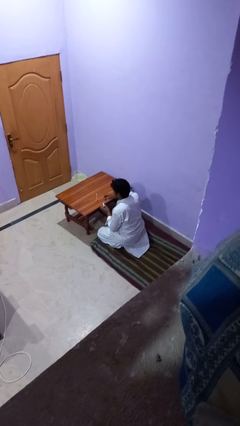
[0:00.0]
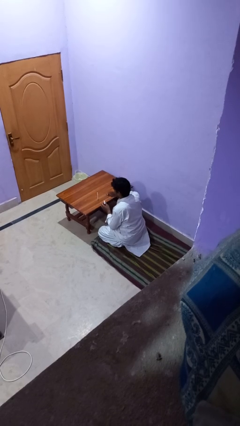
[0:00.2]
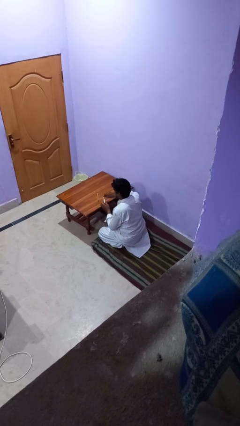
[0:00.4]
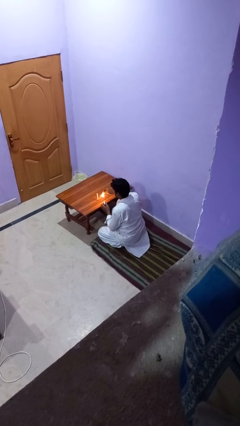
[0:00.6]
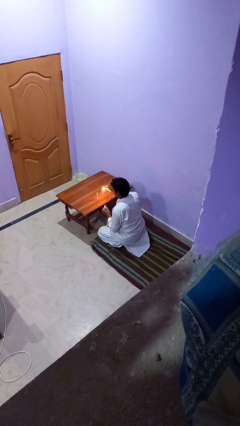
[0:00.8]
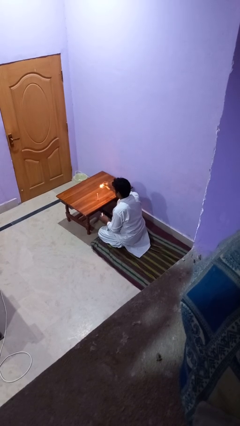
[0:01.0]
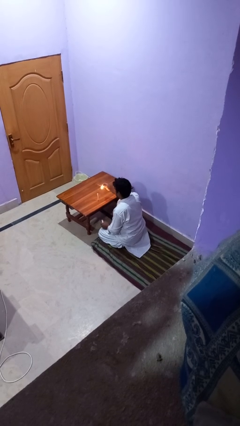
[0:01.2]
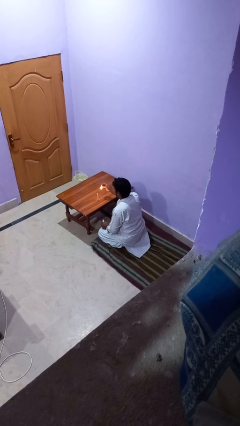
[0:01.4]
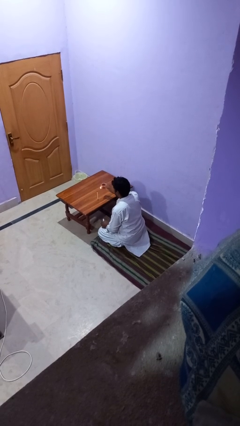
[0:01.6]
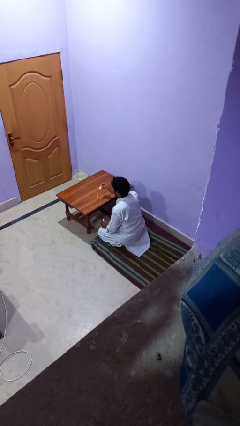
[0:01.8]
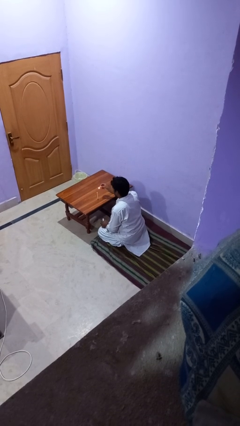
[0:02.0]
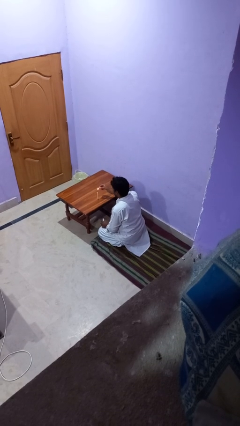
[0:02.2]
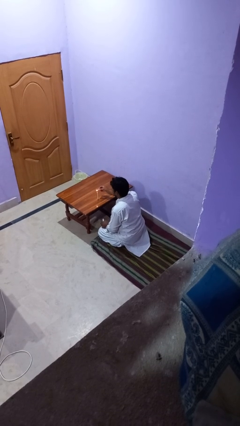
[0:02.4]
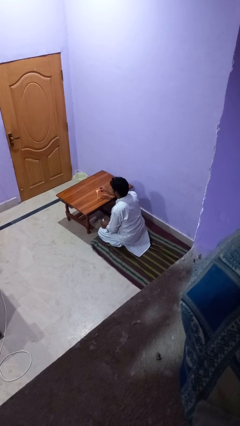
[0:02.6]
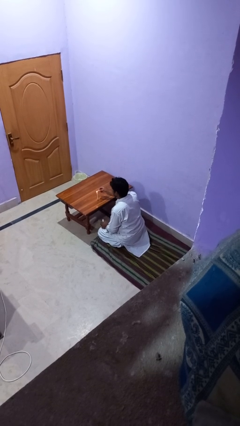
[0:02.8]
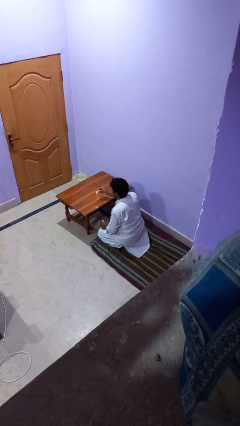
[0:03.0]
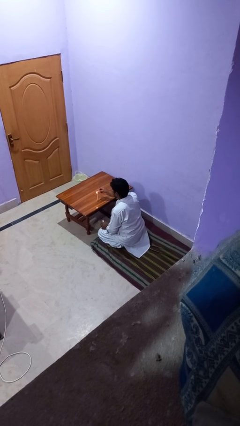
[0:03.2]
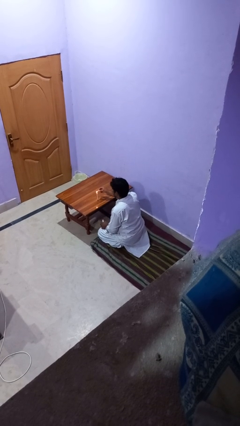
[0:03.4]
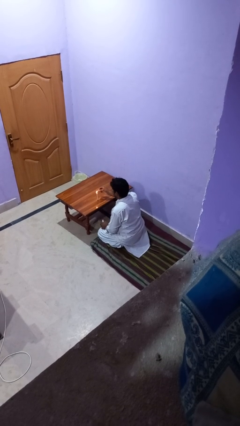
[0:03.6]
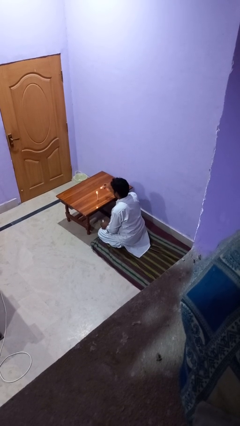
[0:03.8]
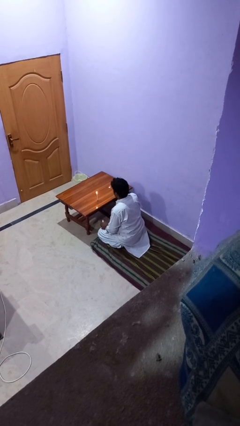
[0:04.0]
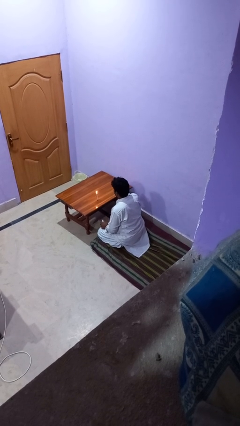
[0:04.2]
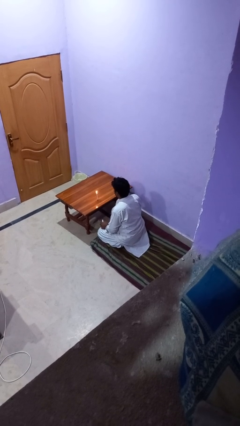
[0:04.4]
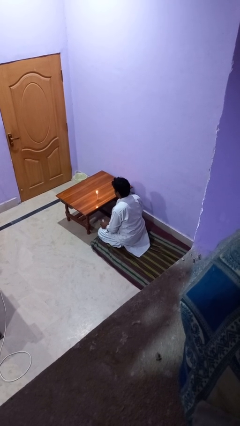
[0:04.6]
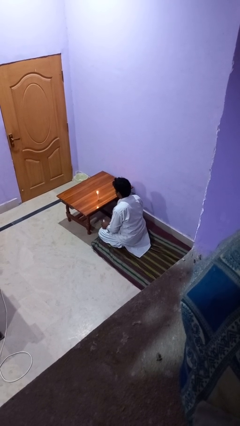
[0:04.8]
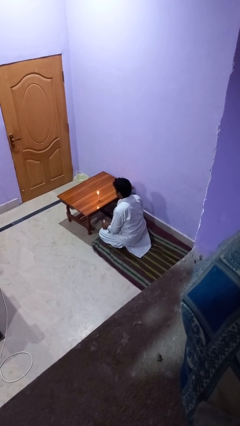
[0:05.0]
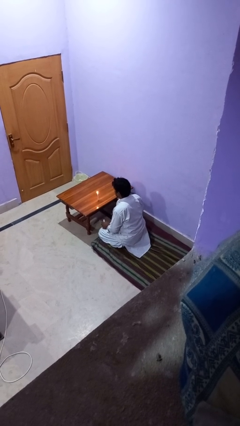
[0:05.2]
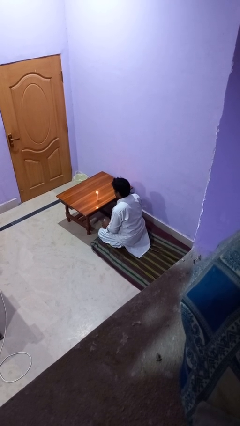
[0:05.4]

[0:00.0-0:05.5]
person lights candle

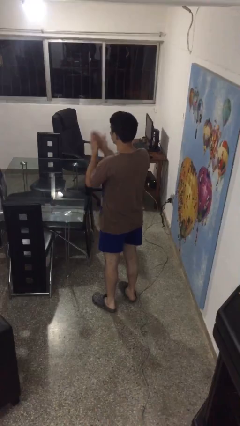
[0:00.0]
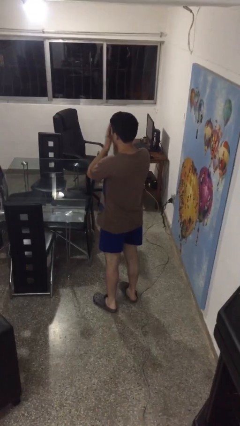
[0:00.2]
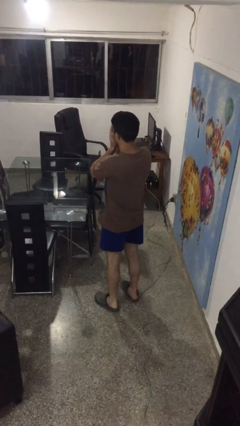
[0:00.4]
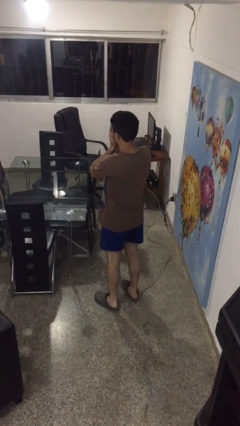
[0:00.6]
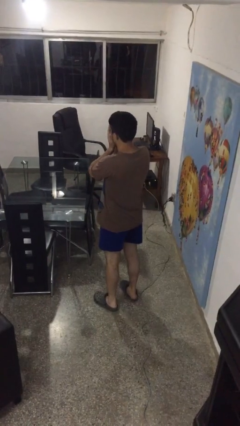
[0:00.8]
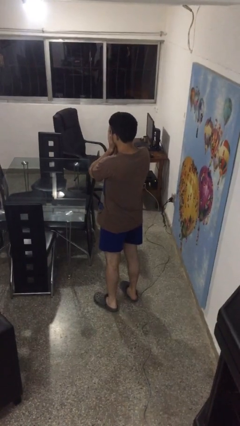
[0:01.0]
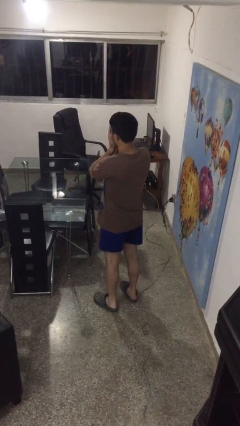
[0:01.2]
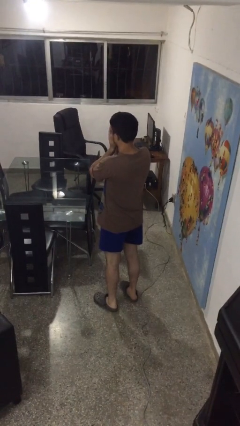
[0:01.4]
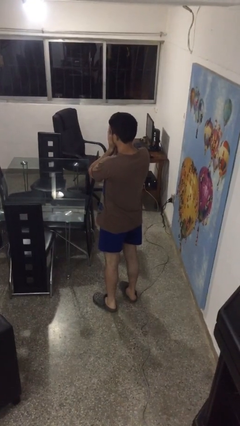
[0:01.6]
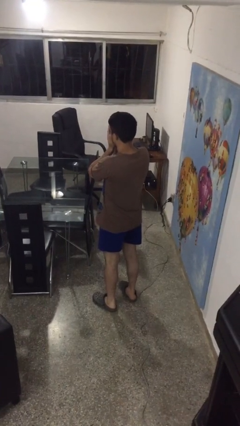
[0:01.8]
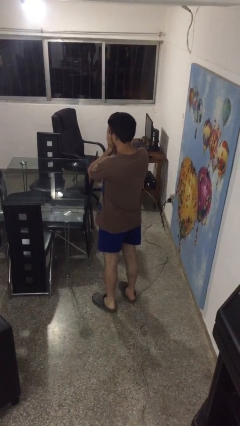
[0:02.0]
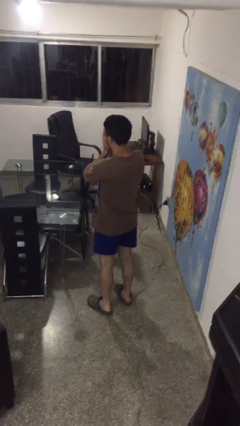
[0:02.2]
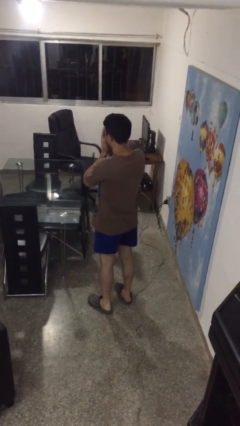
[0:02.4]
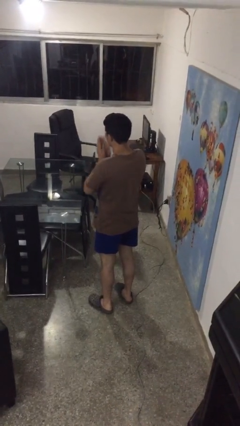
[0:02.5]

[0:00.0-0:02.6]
person covers face with hands

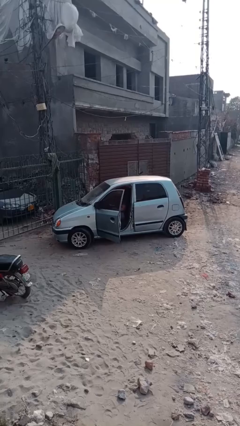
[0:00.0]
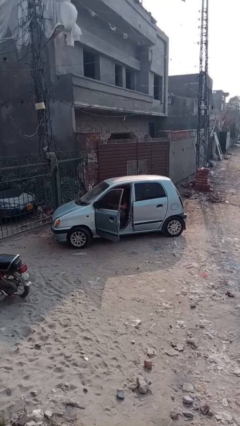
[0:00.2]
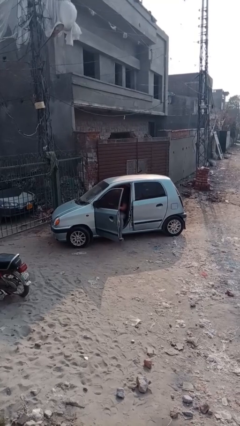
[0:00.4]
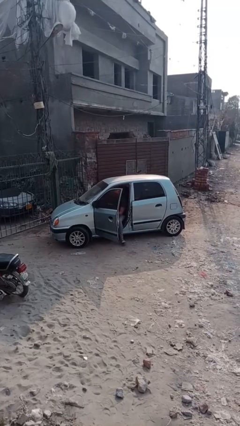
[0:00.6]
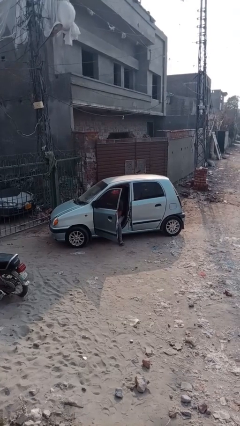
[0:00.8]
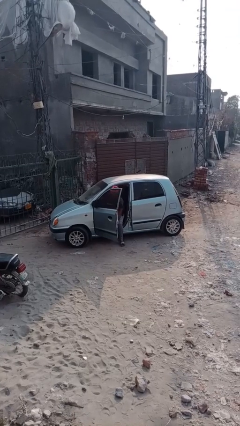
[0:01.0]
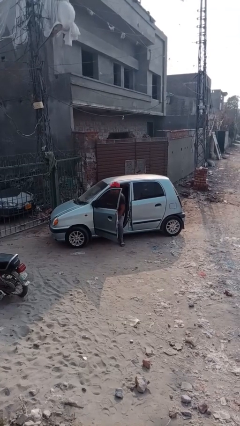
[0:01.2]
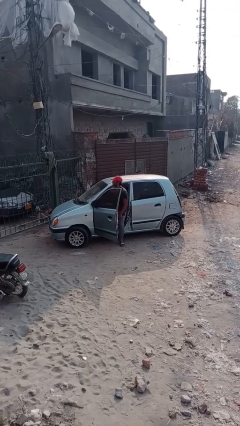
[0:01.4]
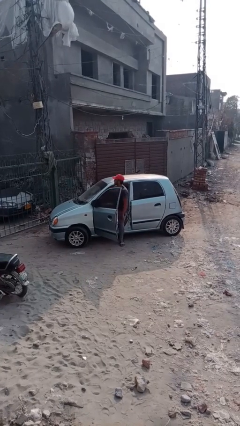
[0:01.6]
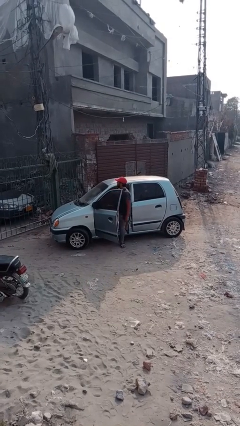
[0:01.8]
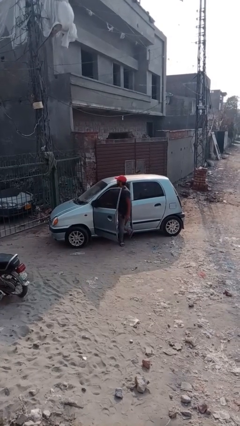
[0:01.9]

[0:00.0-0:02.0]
person exits car

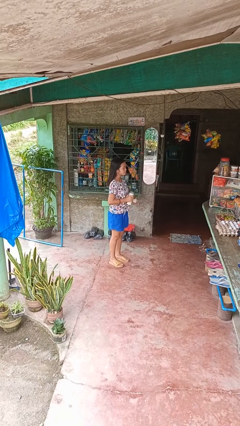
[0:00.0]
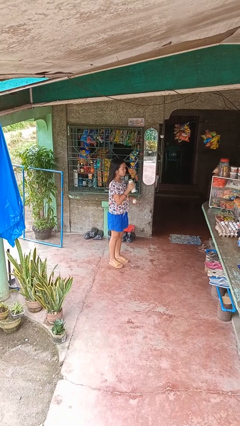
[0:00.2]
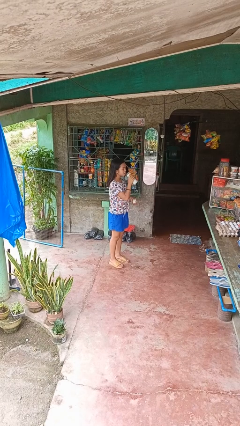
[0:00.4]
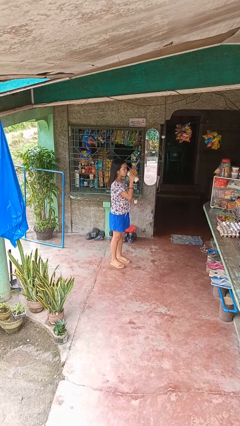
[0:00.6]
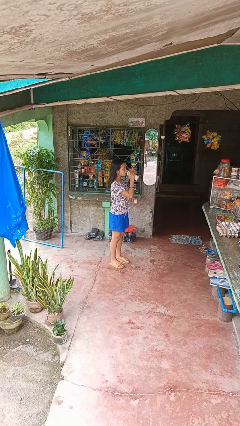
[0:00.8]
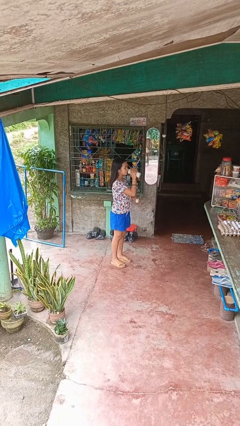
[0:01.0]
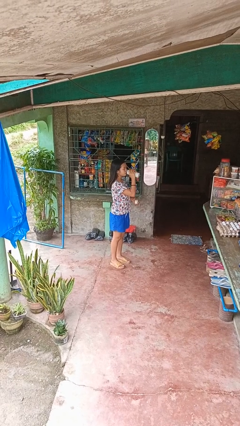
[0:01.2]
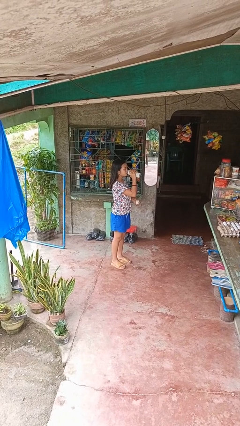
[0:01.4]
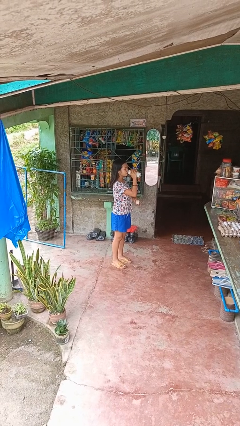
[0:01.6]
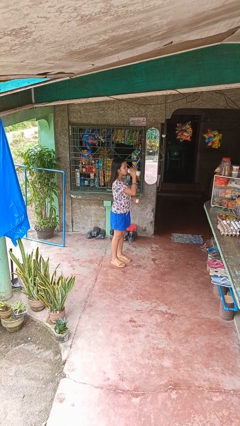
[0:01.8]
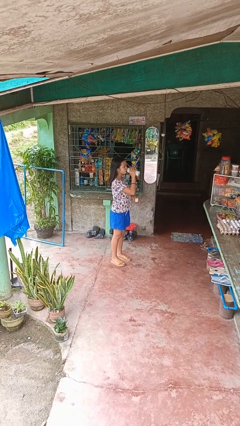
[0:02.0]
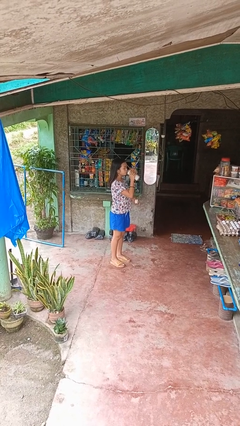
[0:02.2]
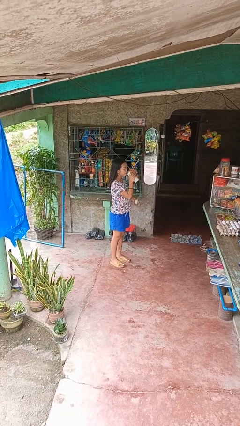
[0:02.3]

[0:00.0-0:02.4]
person drinks from bottle

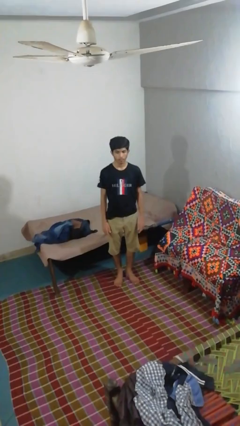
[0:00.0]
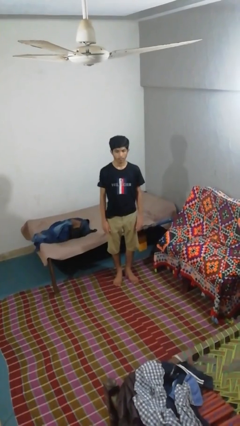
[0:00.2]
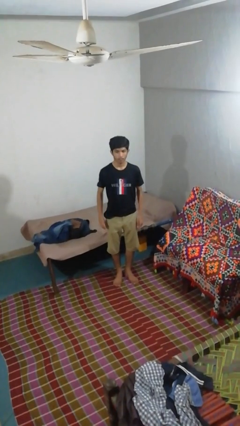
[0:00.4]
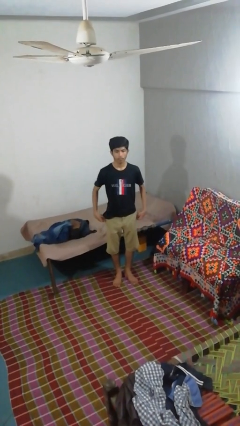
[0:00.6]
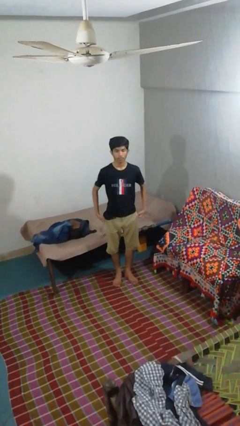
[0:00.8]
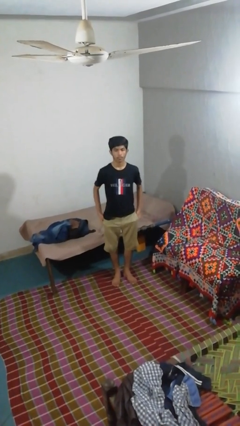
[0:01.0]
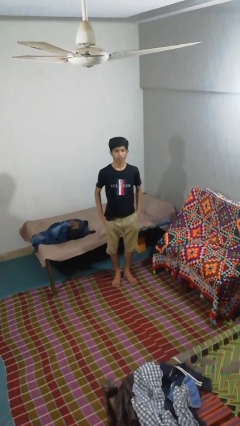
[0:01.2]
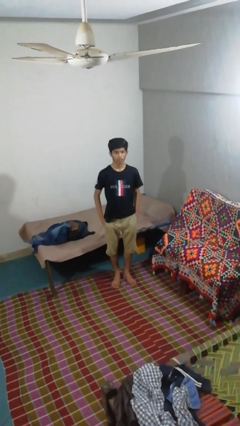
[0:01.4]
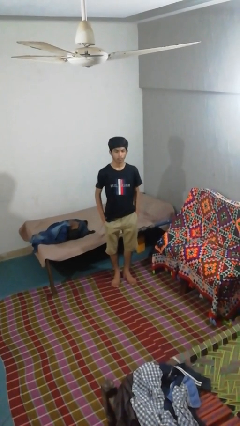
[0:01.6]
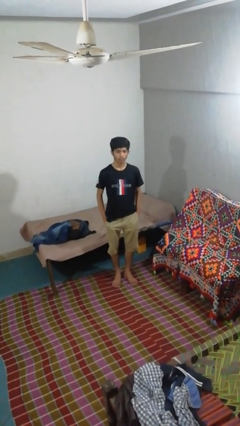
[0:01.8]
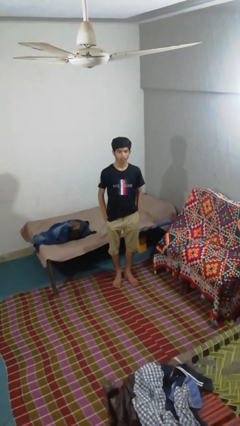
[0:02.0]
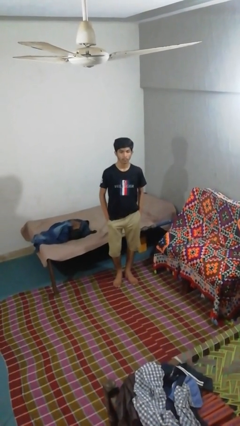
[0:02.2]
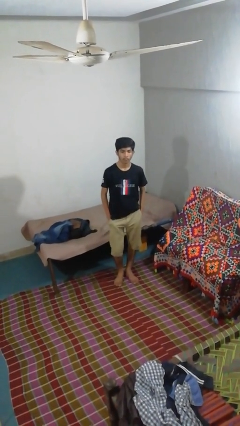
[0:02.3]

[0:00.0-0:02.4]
person puts hands in back pockets

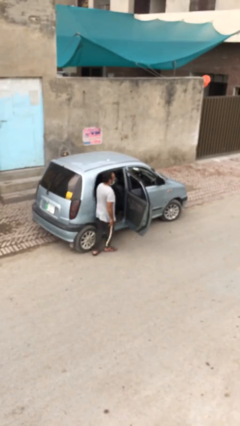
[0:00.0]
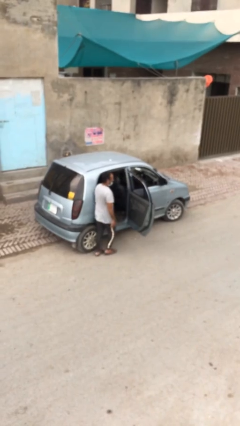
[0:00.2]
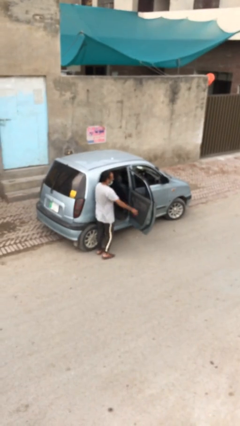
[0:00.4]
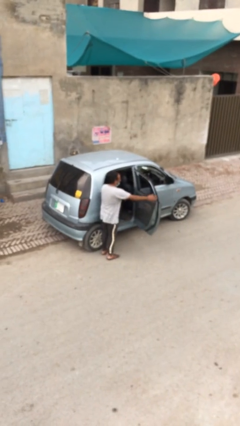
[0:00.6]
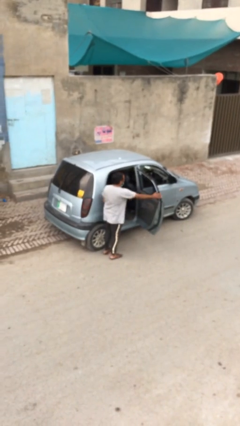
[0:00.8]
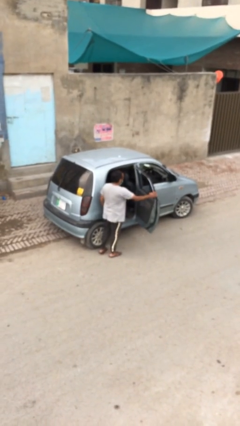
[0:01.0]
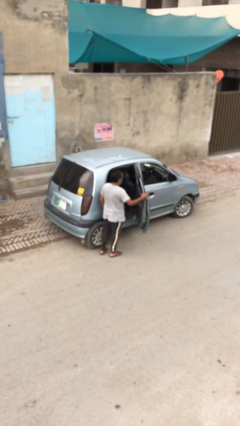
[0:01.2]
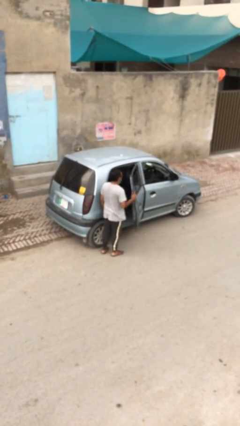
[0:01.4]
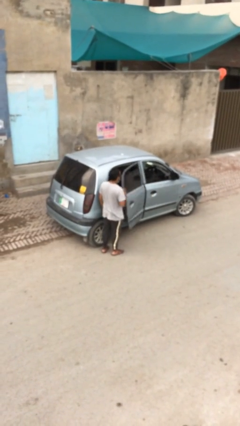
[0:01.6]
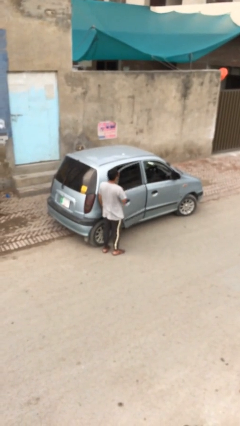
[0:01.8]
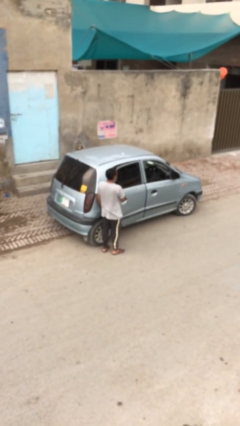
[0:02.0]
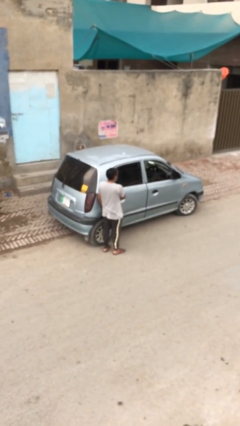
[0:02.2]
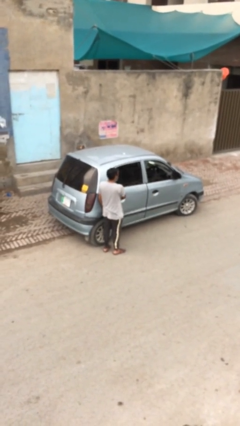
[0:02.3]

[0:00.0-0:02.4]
person closes car door
